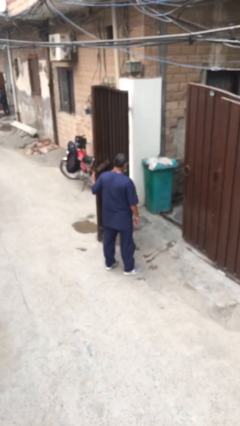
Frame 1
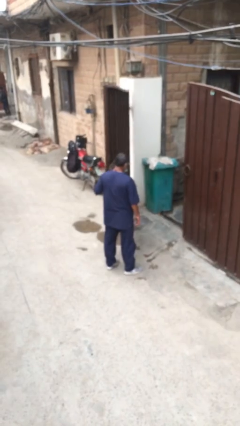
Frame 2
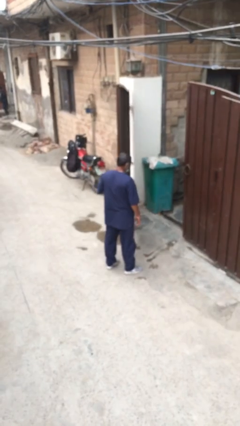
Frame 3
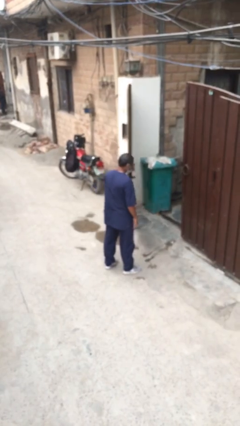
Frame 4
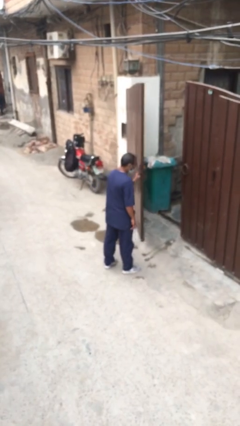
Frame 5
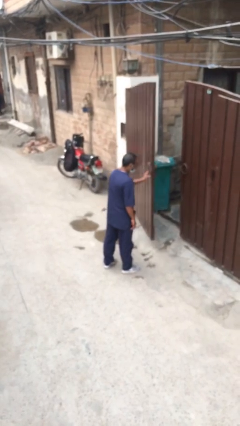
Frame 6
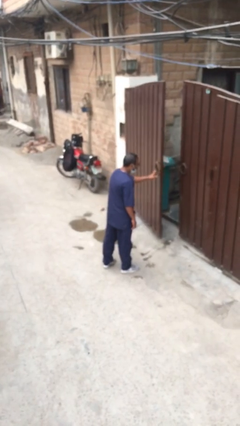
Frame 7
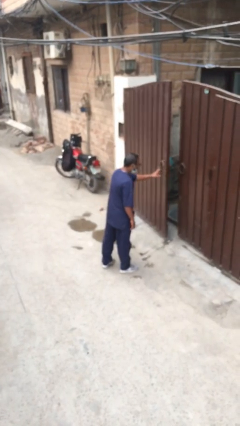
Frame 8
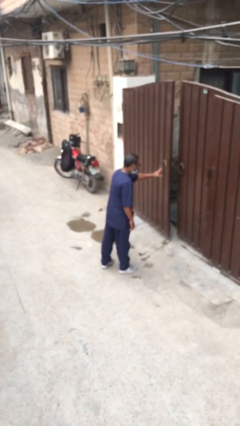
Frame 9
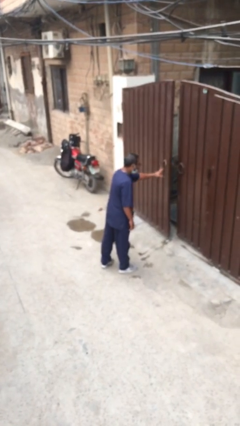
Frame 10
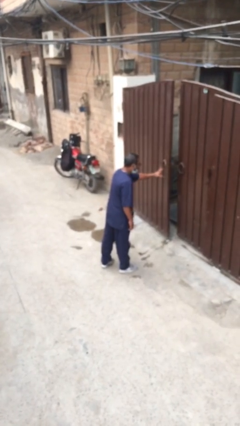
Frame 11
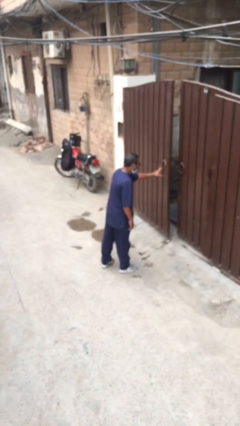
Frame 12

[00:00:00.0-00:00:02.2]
person closes facility door

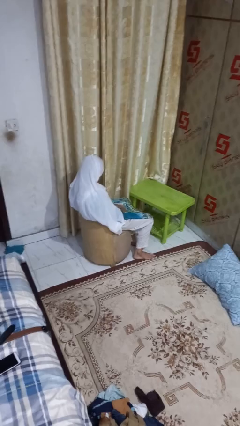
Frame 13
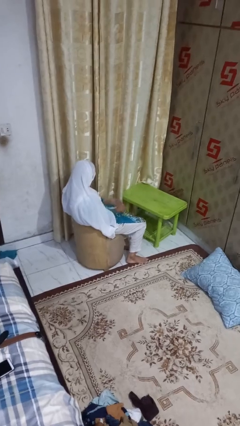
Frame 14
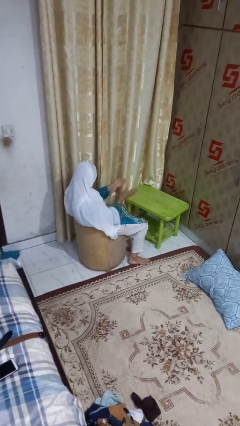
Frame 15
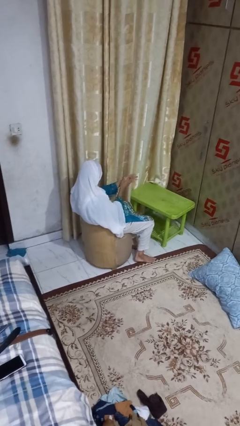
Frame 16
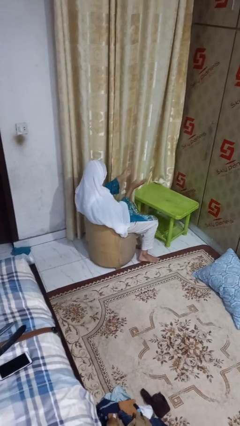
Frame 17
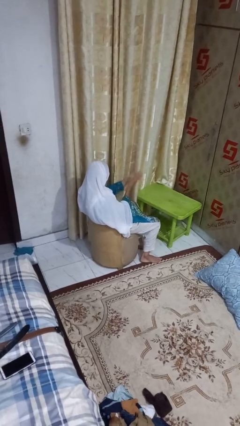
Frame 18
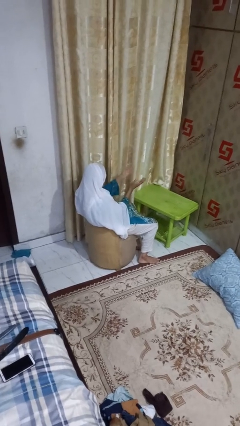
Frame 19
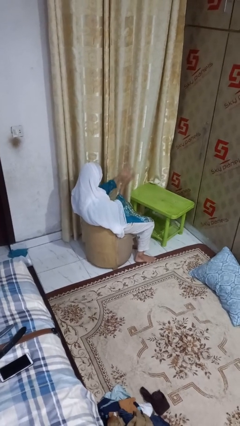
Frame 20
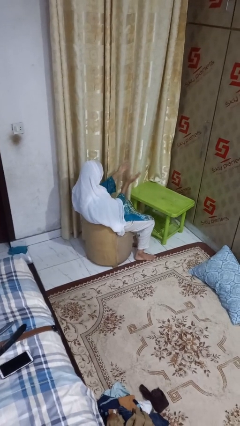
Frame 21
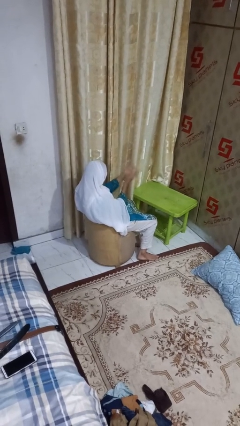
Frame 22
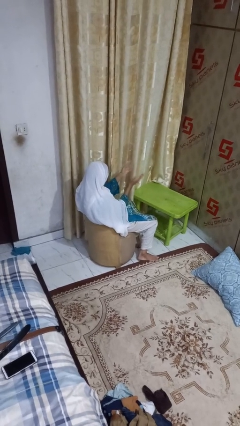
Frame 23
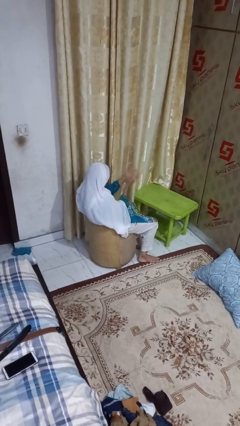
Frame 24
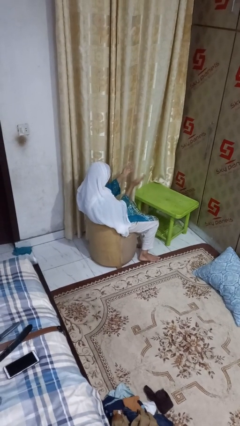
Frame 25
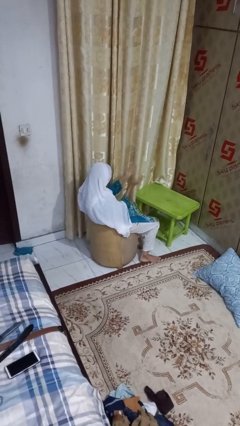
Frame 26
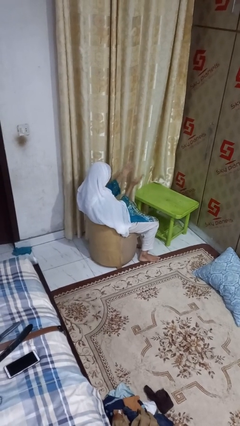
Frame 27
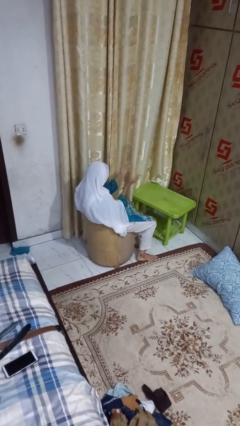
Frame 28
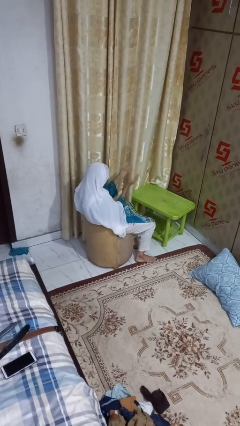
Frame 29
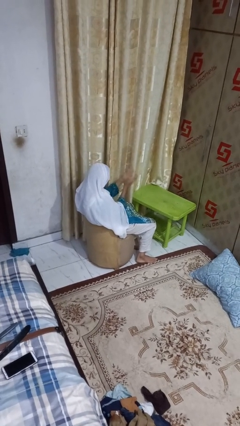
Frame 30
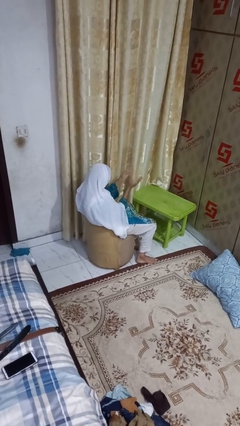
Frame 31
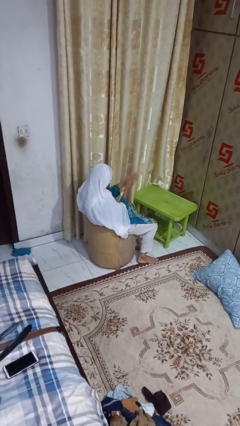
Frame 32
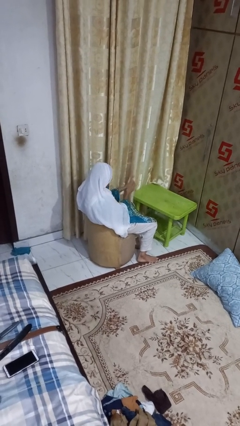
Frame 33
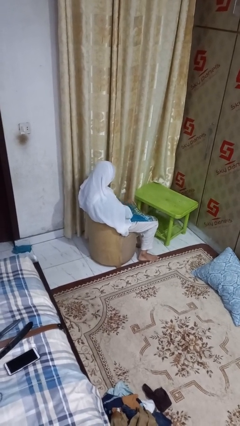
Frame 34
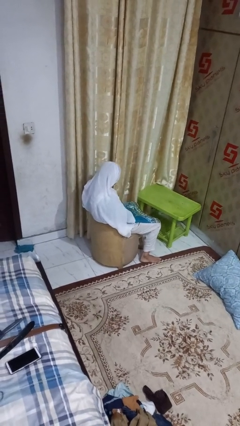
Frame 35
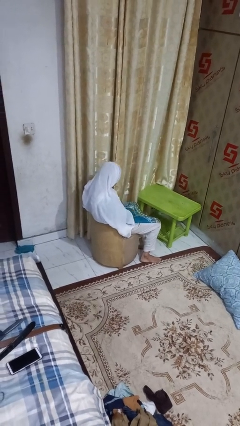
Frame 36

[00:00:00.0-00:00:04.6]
person claps hands

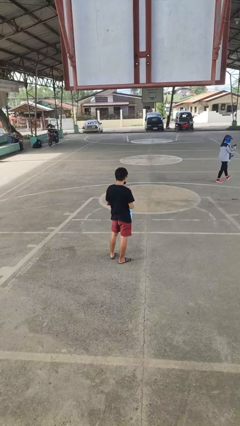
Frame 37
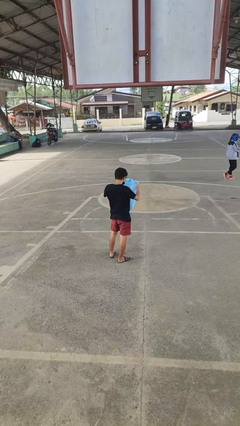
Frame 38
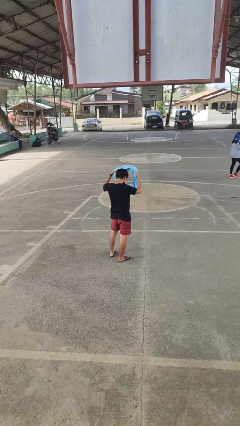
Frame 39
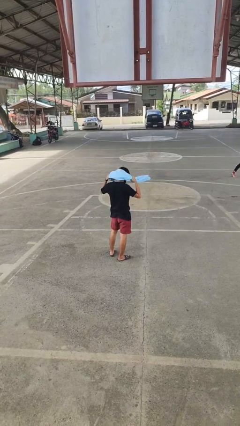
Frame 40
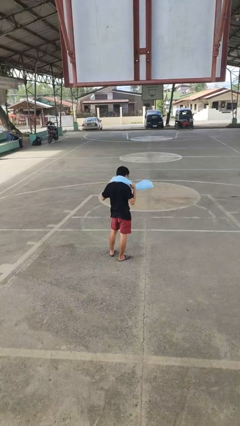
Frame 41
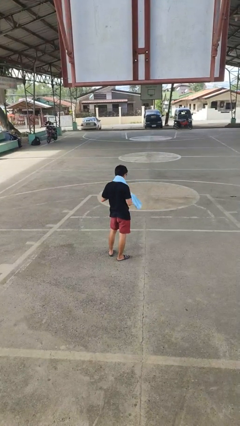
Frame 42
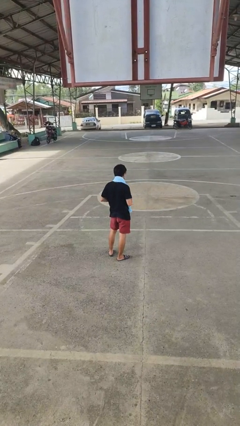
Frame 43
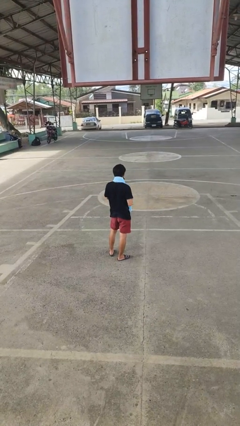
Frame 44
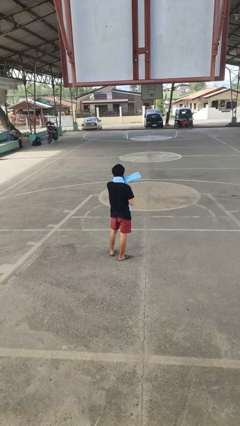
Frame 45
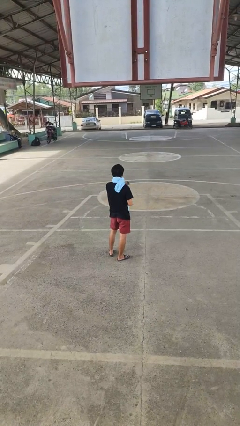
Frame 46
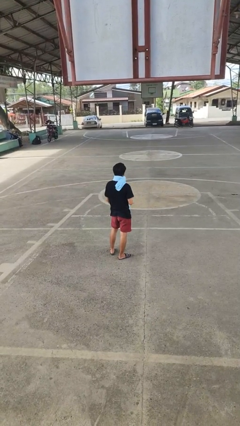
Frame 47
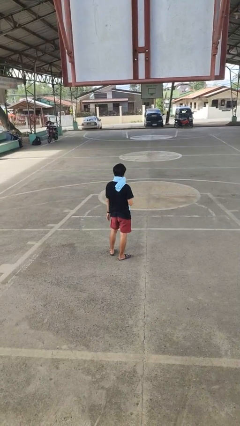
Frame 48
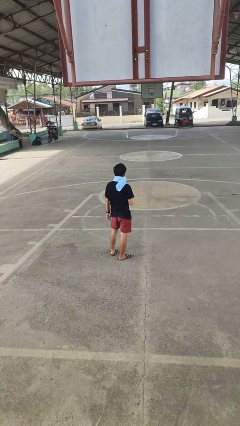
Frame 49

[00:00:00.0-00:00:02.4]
person puts on scarf

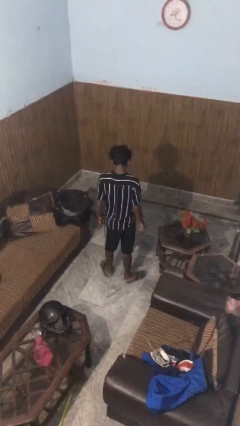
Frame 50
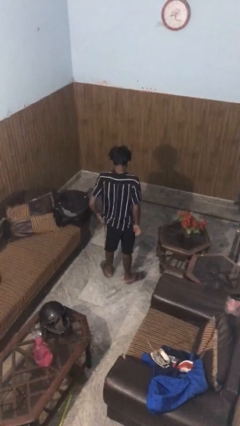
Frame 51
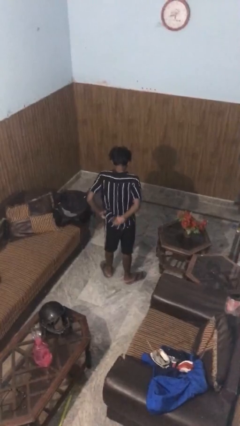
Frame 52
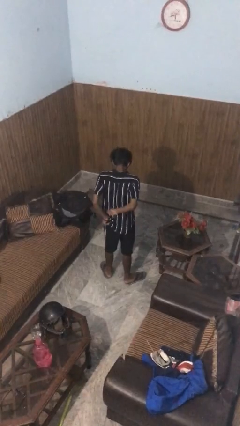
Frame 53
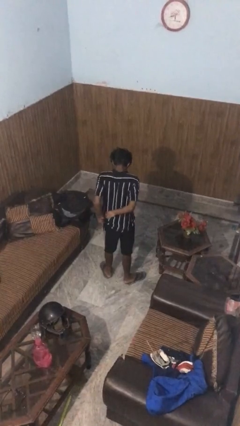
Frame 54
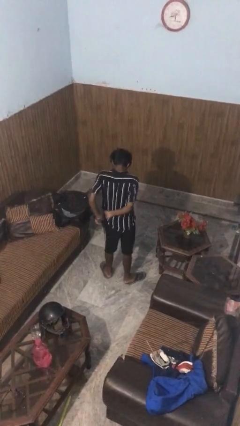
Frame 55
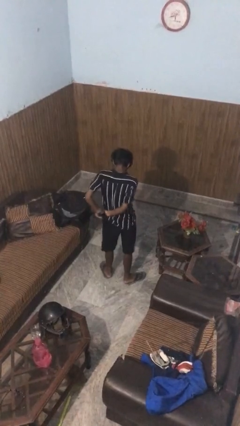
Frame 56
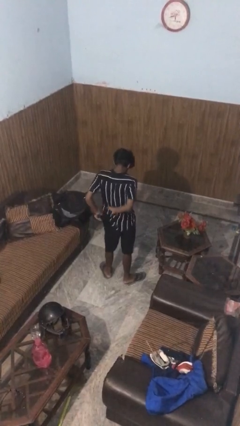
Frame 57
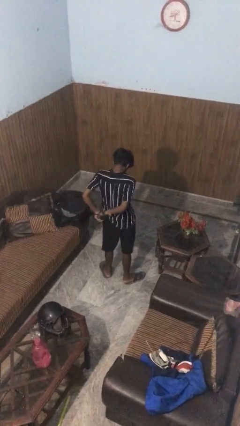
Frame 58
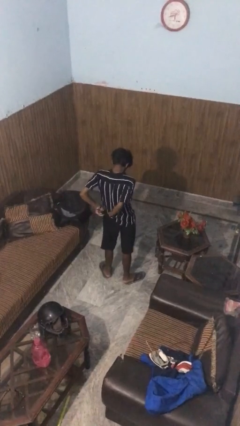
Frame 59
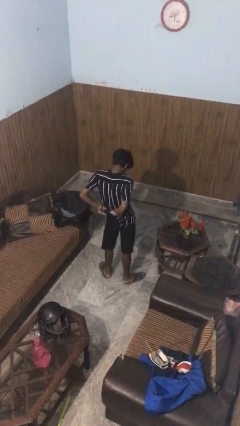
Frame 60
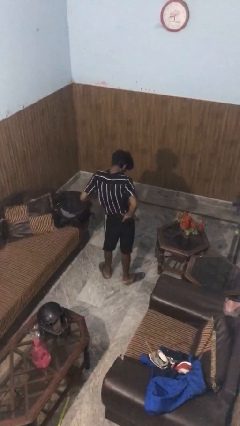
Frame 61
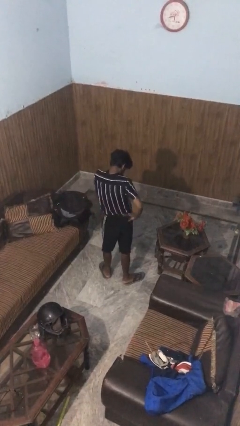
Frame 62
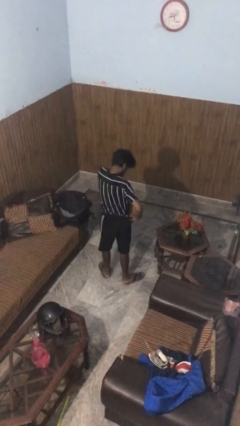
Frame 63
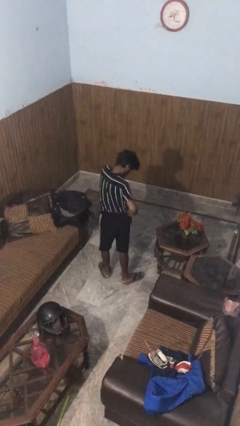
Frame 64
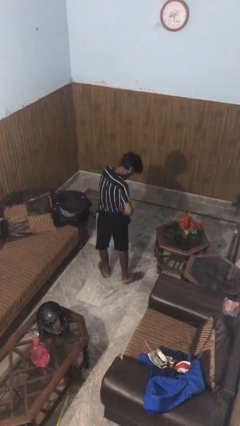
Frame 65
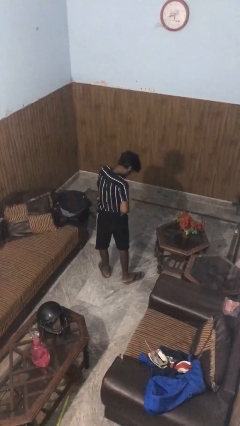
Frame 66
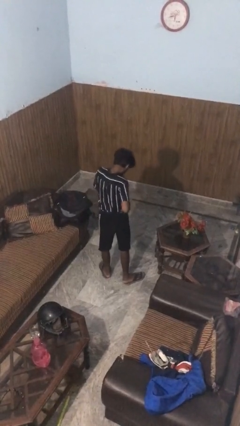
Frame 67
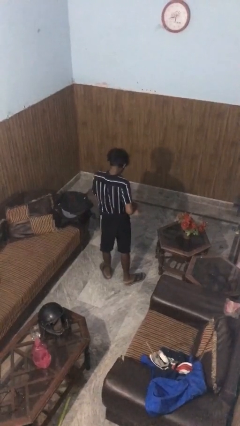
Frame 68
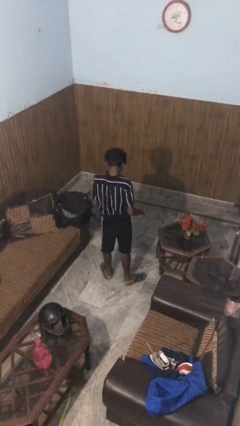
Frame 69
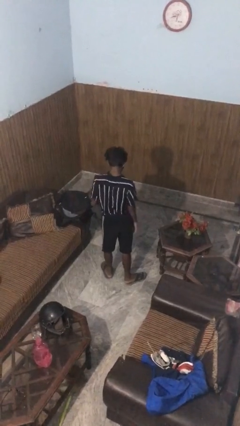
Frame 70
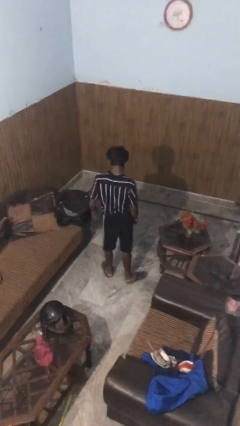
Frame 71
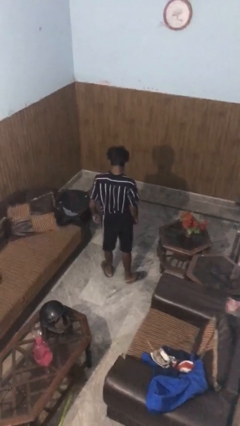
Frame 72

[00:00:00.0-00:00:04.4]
person tucks in shirt

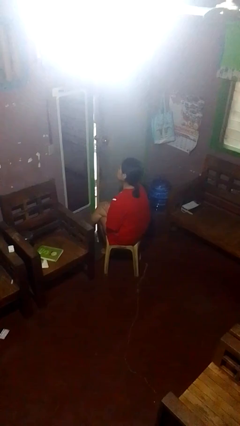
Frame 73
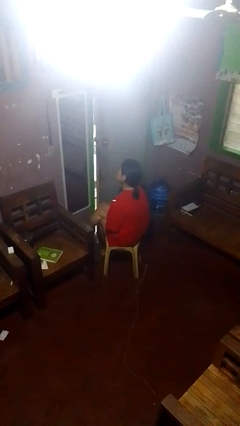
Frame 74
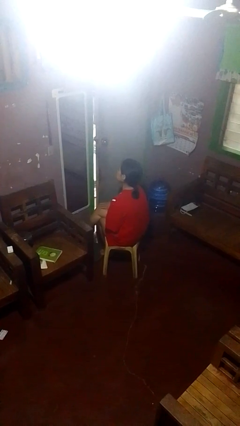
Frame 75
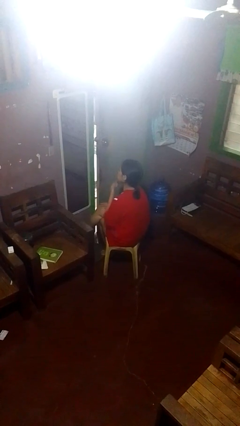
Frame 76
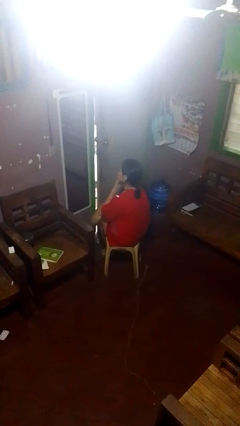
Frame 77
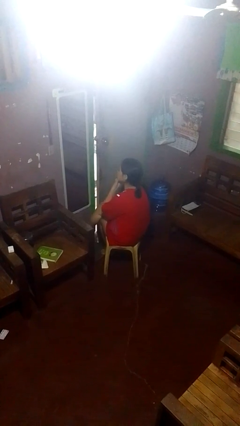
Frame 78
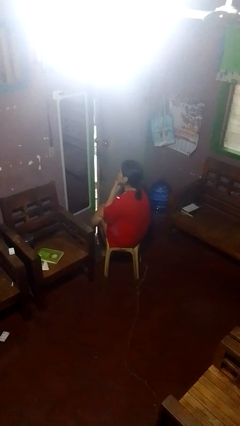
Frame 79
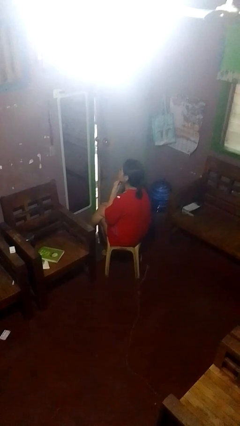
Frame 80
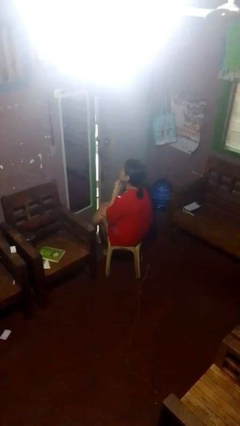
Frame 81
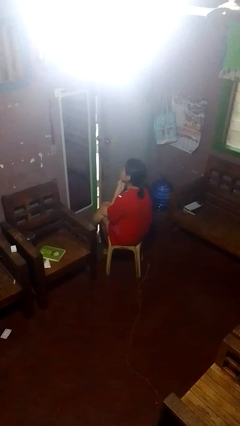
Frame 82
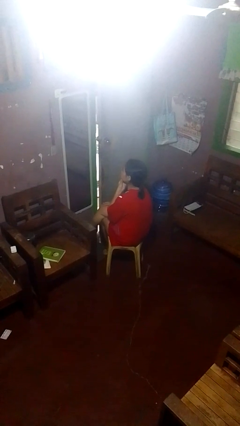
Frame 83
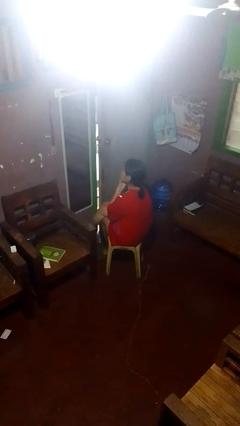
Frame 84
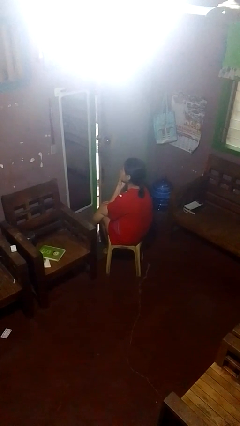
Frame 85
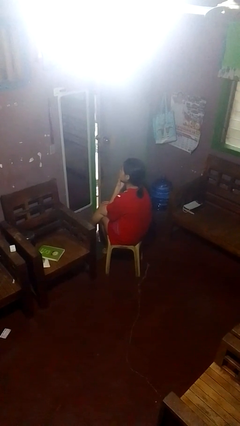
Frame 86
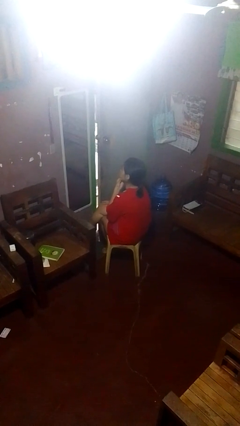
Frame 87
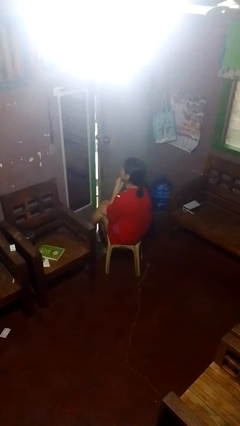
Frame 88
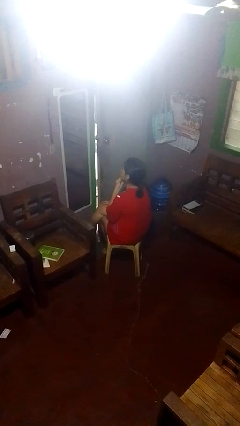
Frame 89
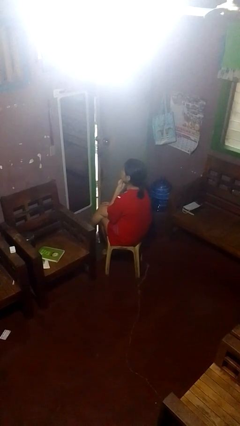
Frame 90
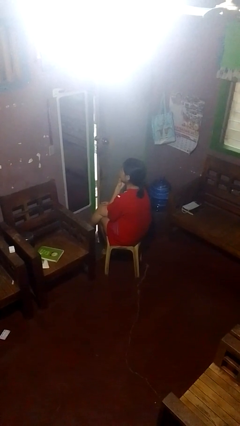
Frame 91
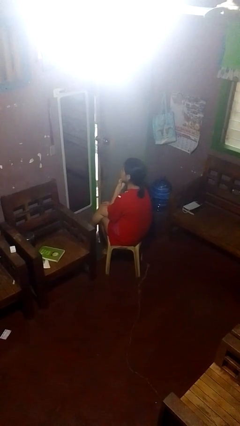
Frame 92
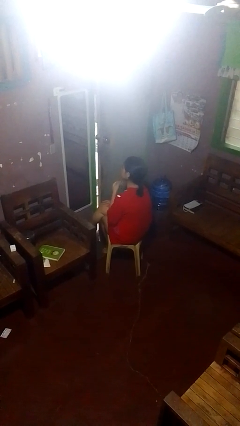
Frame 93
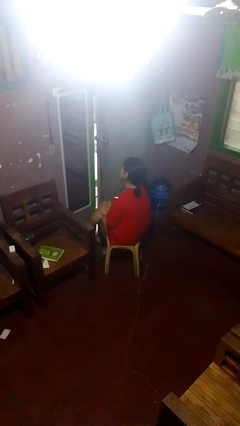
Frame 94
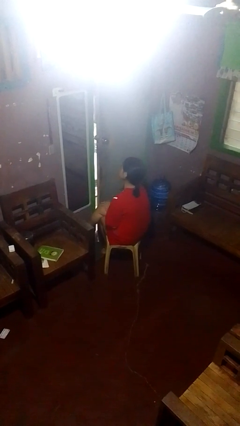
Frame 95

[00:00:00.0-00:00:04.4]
person strokes chin
